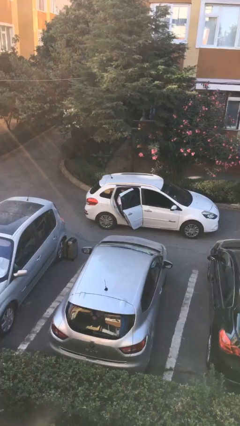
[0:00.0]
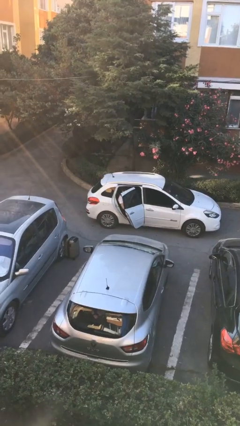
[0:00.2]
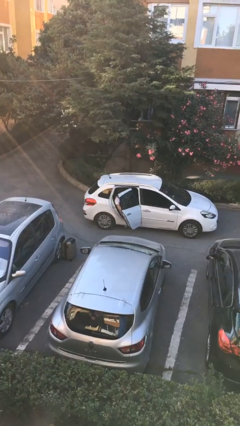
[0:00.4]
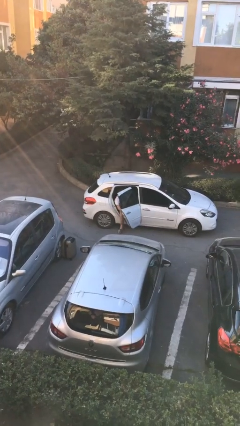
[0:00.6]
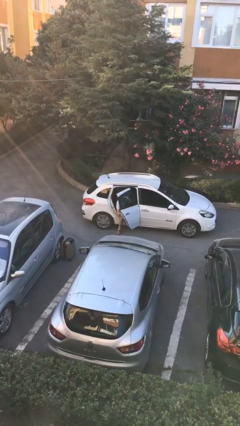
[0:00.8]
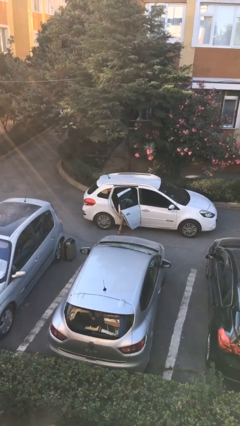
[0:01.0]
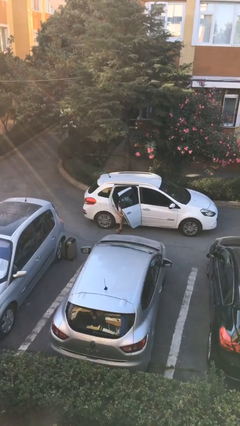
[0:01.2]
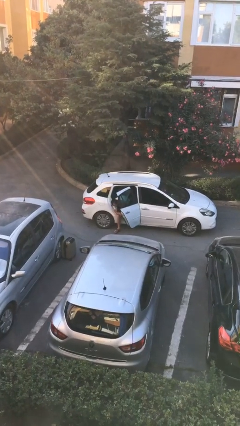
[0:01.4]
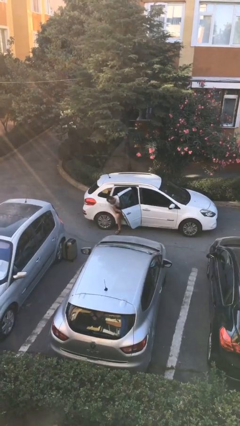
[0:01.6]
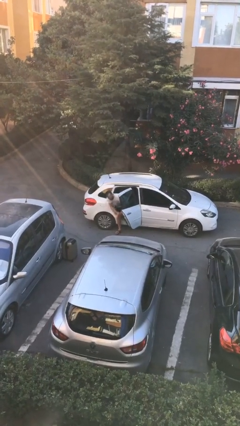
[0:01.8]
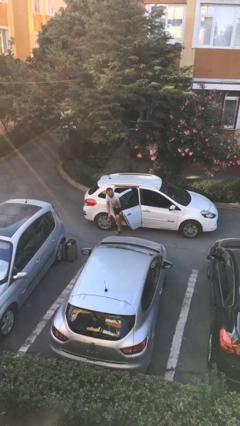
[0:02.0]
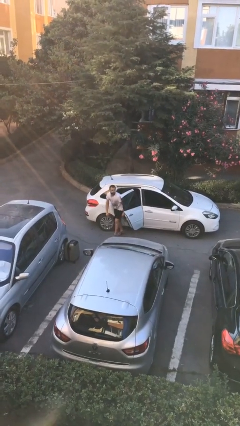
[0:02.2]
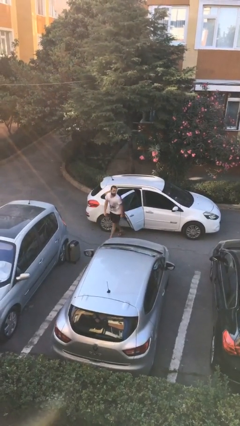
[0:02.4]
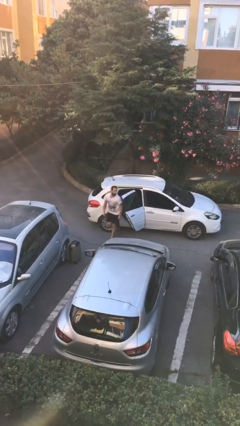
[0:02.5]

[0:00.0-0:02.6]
person exits car

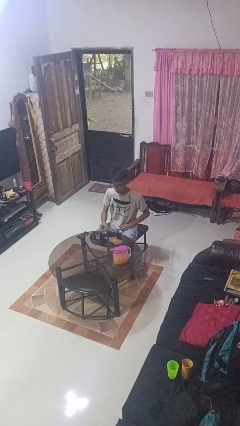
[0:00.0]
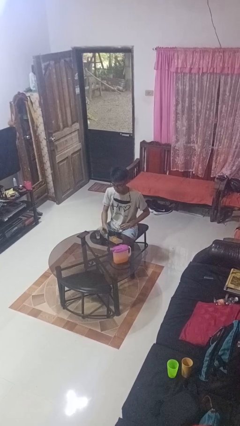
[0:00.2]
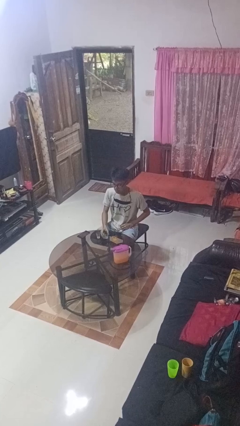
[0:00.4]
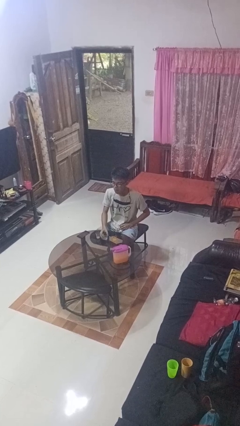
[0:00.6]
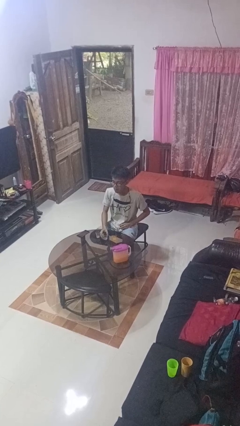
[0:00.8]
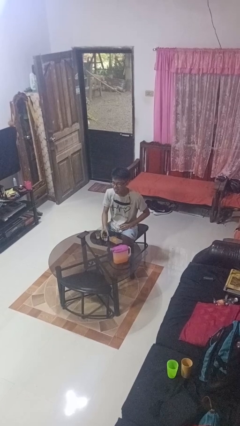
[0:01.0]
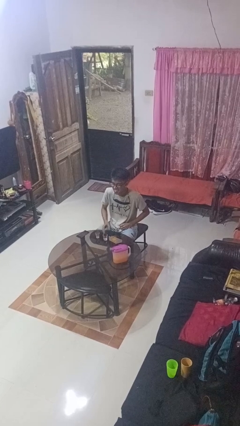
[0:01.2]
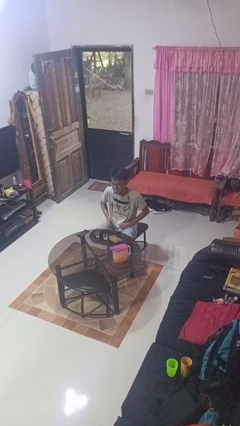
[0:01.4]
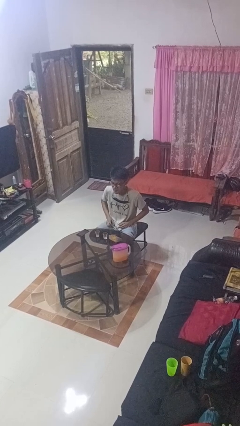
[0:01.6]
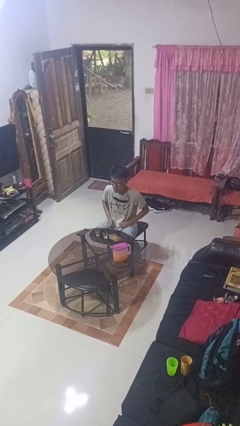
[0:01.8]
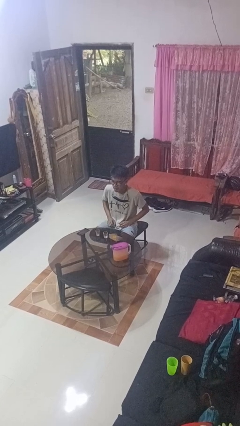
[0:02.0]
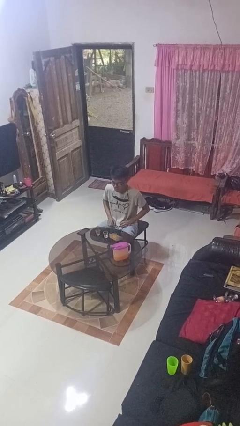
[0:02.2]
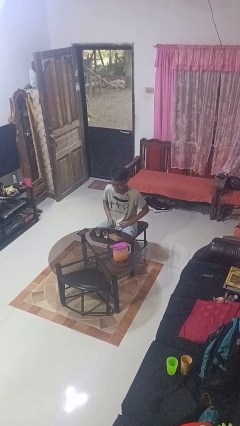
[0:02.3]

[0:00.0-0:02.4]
person puts down object on table

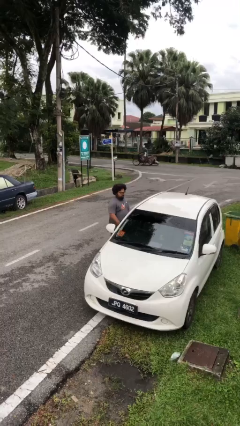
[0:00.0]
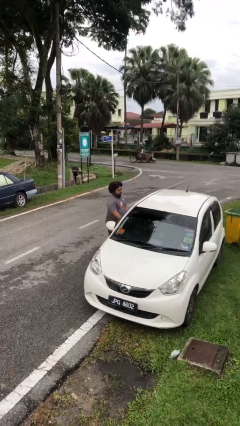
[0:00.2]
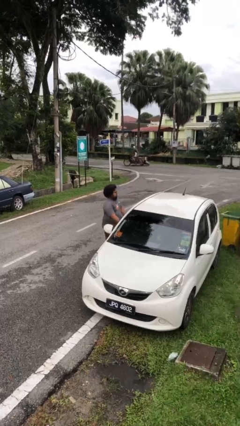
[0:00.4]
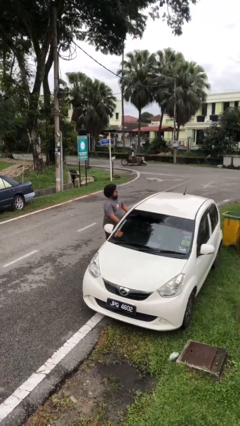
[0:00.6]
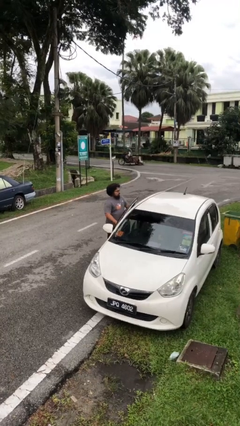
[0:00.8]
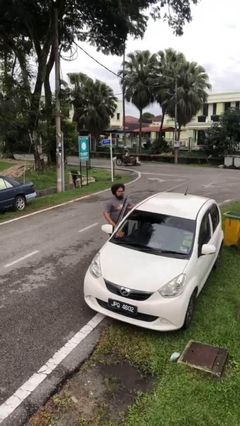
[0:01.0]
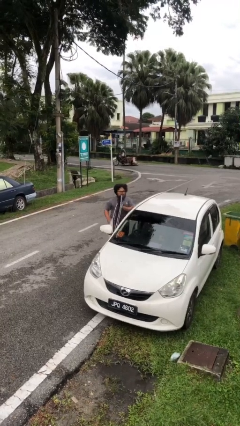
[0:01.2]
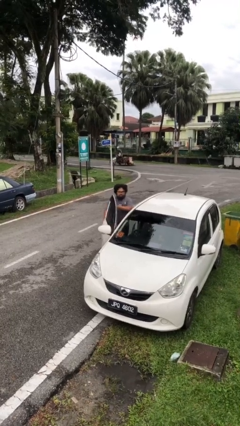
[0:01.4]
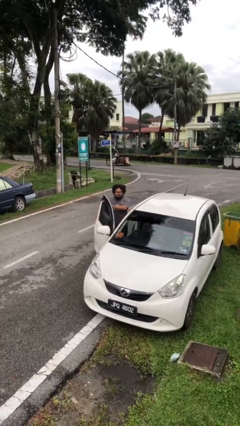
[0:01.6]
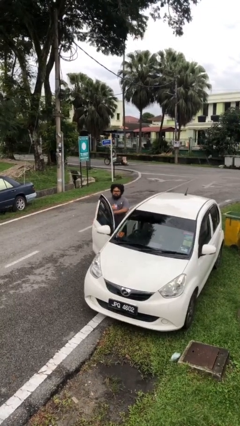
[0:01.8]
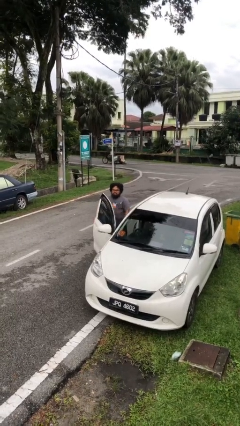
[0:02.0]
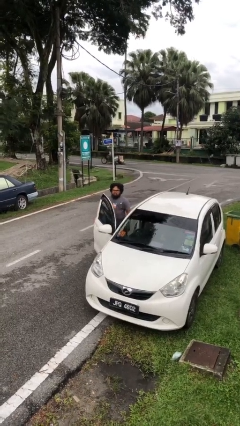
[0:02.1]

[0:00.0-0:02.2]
person opens car door

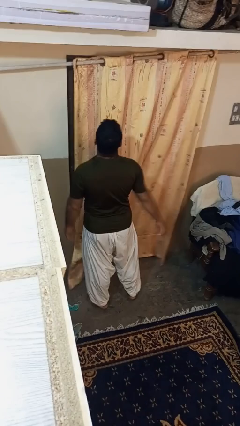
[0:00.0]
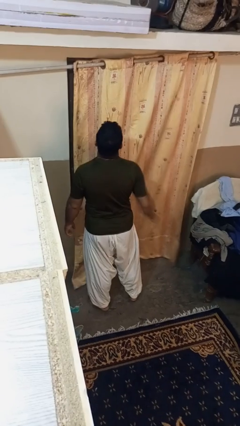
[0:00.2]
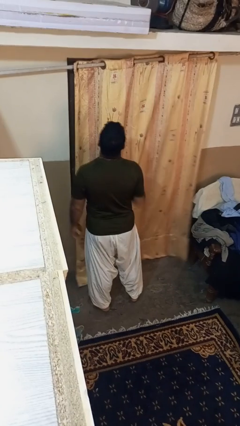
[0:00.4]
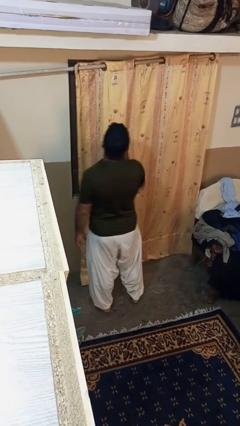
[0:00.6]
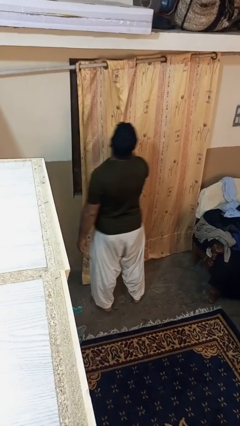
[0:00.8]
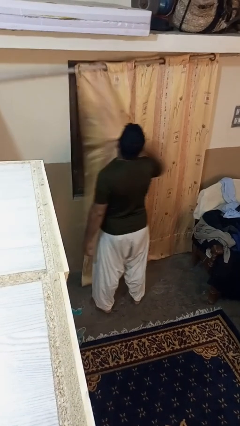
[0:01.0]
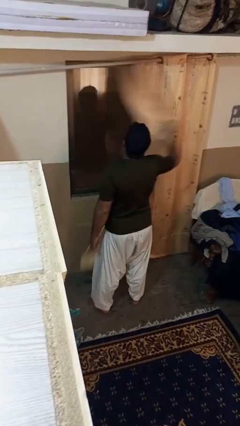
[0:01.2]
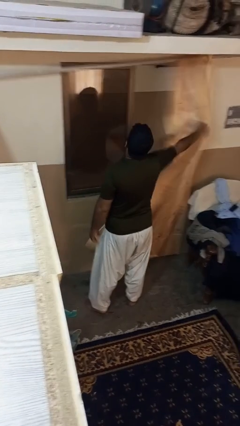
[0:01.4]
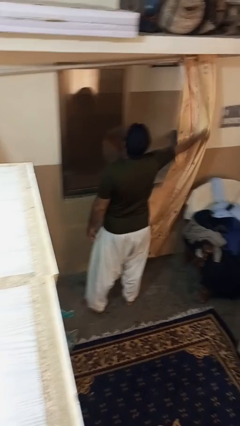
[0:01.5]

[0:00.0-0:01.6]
person opens curtains

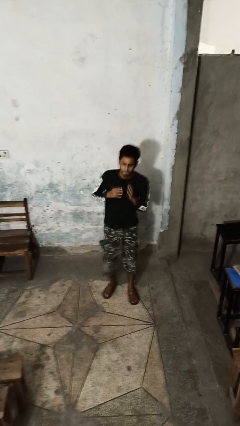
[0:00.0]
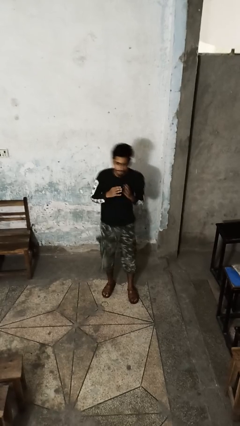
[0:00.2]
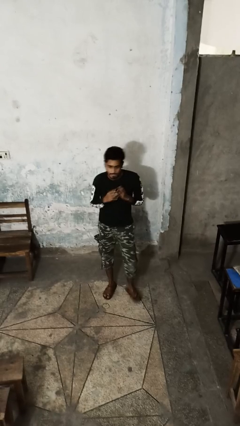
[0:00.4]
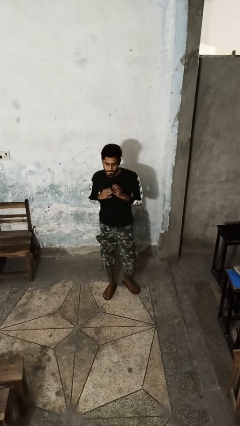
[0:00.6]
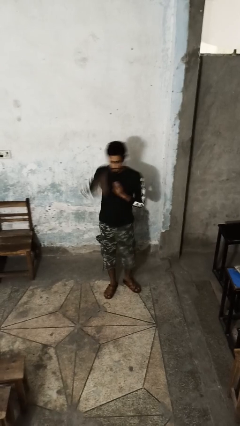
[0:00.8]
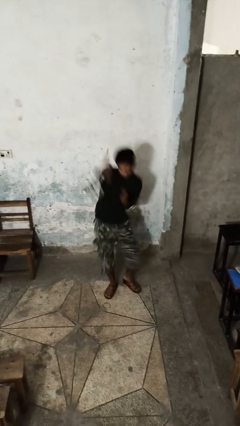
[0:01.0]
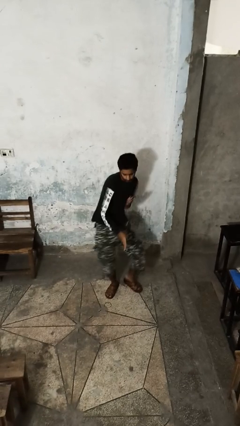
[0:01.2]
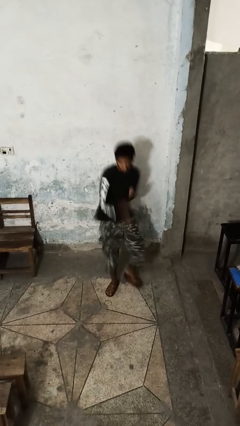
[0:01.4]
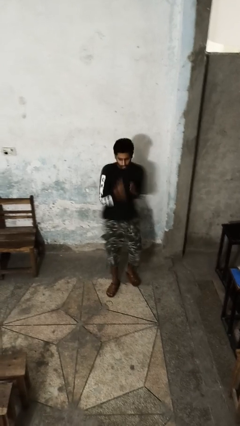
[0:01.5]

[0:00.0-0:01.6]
person karate chop

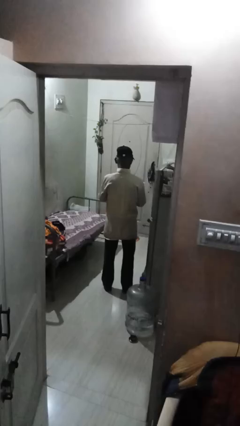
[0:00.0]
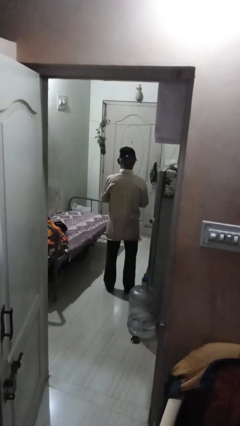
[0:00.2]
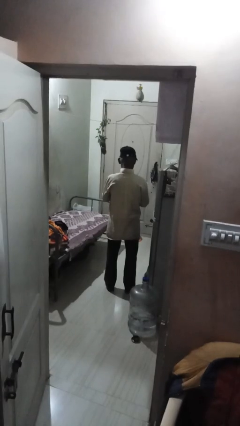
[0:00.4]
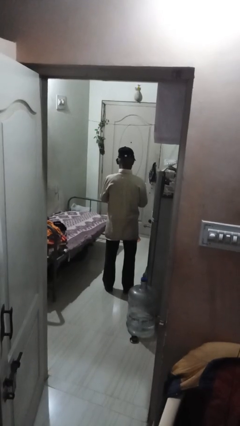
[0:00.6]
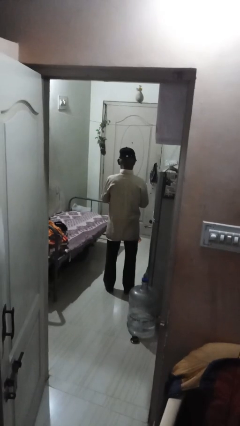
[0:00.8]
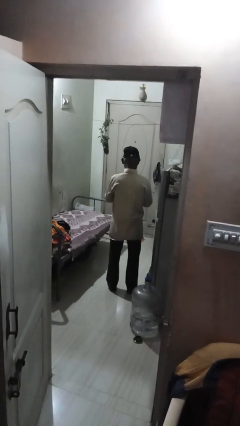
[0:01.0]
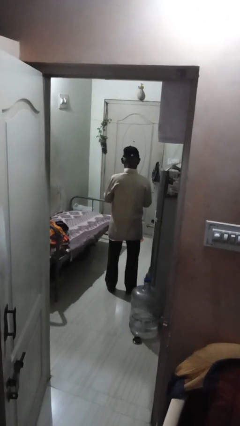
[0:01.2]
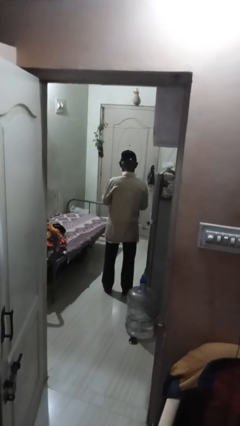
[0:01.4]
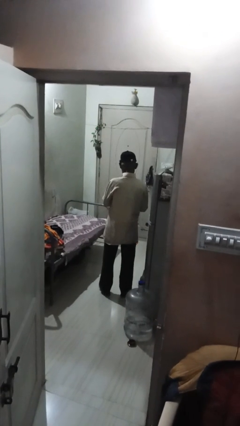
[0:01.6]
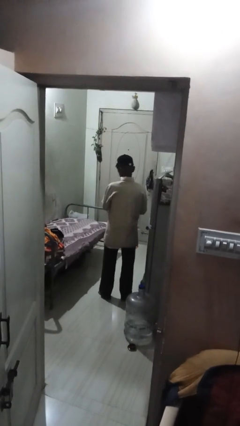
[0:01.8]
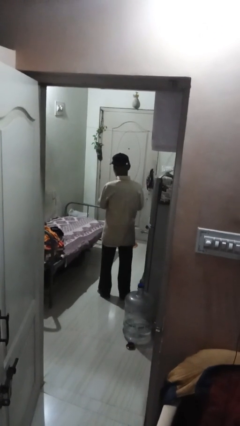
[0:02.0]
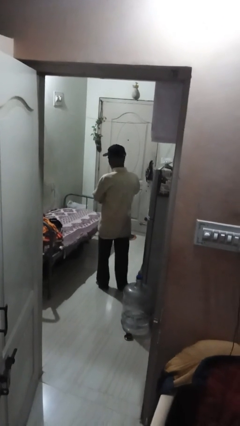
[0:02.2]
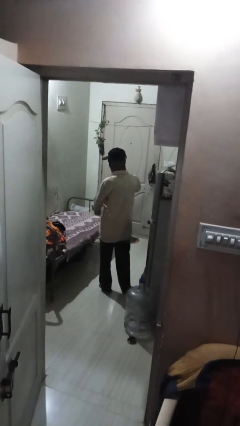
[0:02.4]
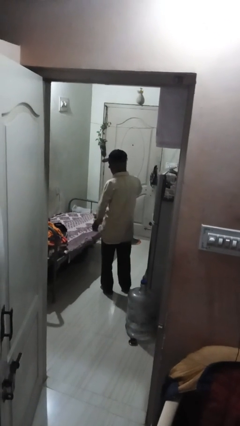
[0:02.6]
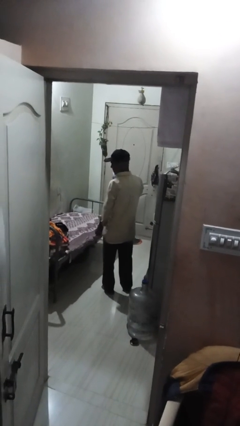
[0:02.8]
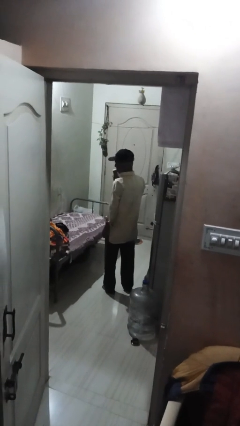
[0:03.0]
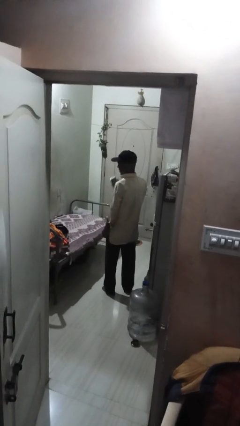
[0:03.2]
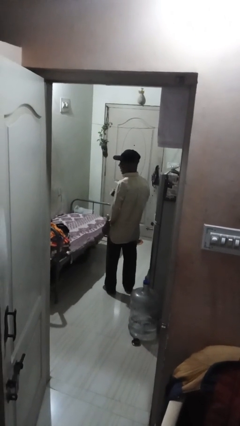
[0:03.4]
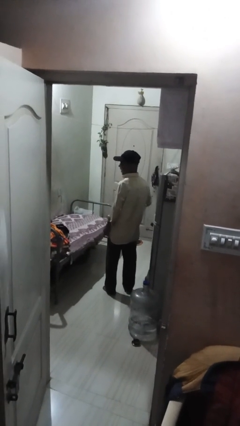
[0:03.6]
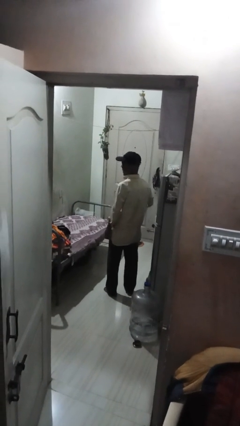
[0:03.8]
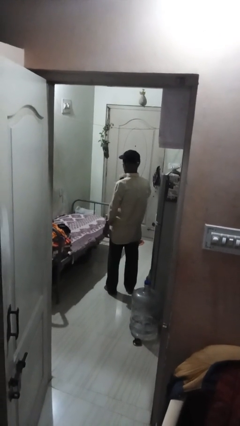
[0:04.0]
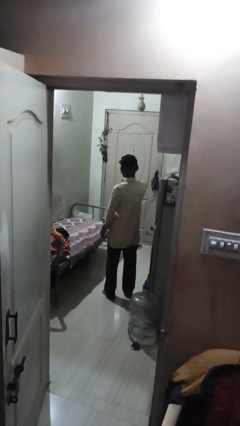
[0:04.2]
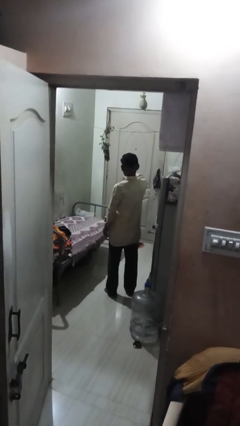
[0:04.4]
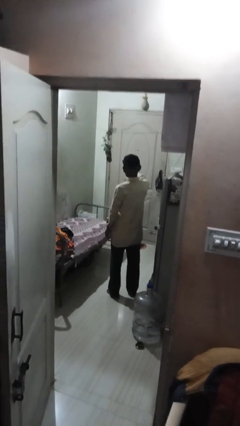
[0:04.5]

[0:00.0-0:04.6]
person takes selfie

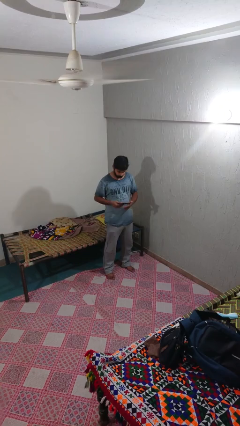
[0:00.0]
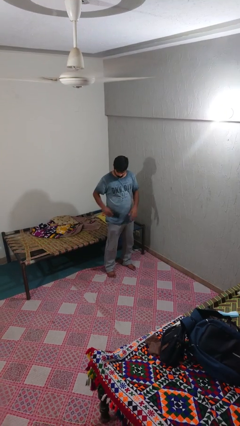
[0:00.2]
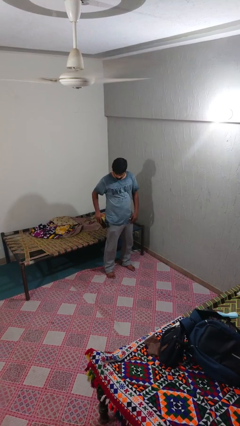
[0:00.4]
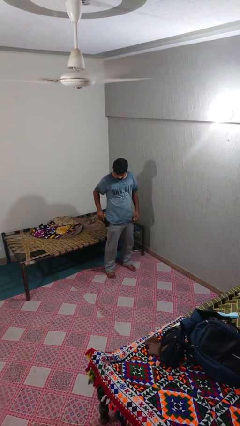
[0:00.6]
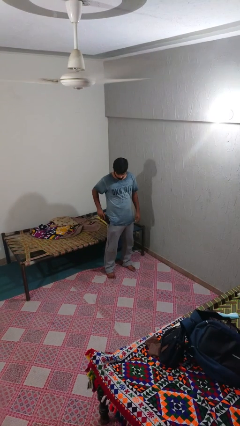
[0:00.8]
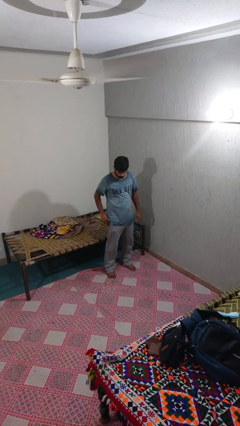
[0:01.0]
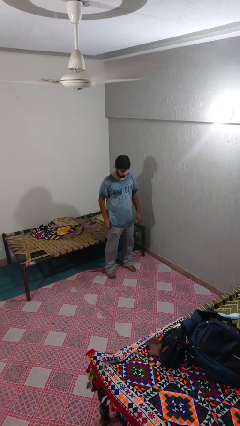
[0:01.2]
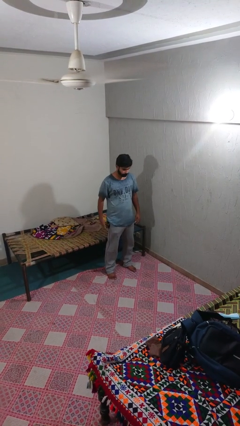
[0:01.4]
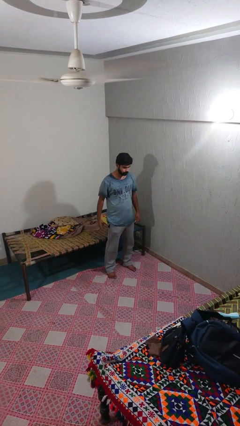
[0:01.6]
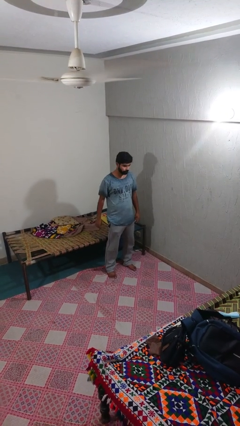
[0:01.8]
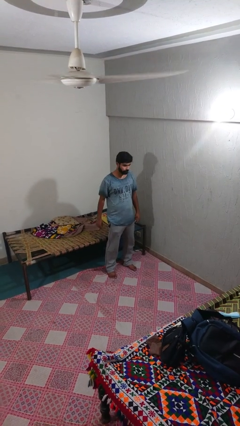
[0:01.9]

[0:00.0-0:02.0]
person puts phone into pocket
